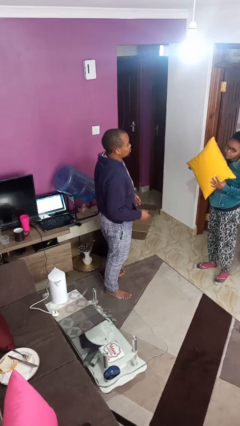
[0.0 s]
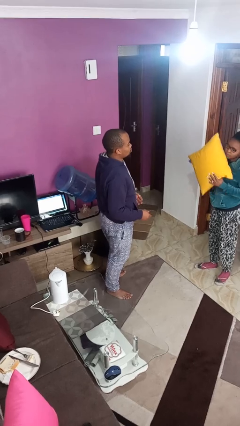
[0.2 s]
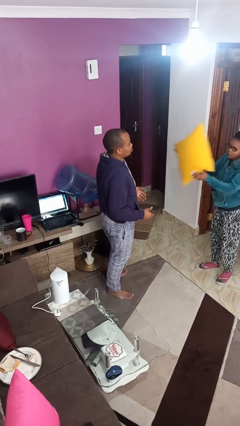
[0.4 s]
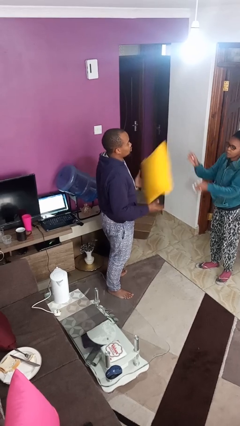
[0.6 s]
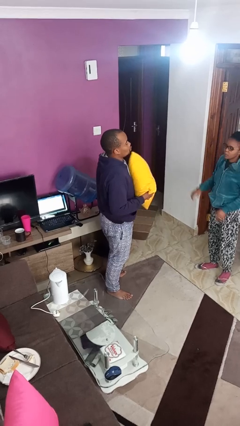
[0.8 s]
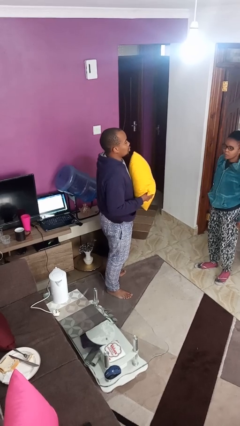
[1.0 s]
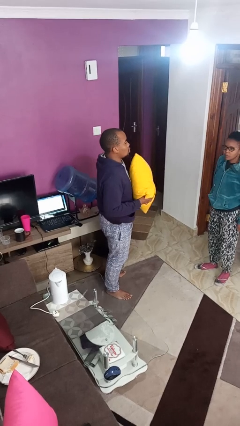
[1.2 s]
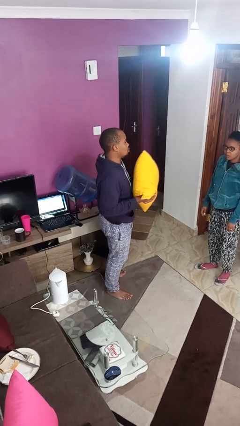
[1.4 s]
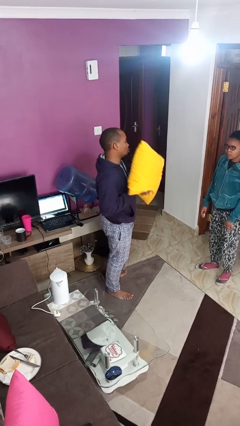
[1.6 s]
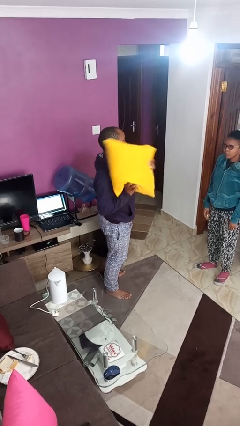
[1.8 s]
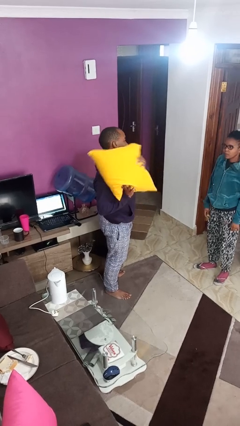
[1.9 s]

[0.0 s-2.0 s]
person catches object from person

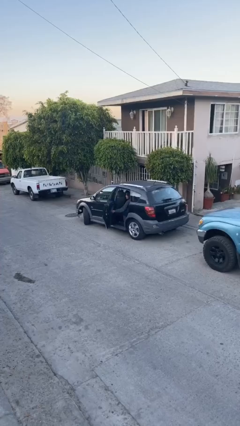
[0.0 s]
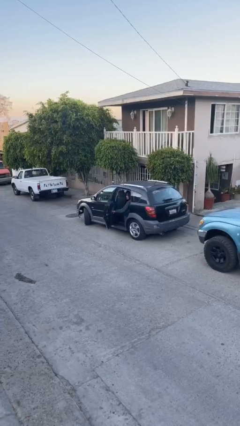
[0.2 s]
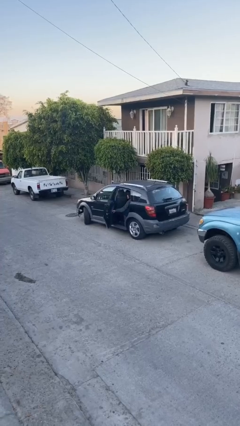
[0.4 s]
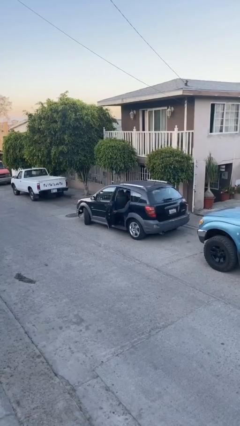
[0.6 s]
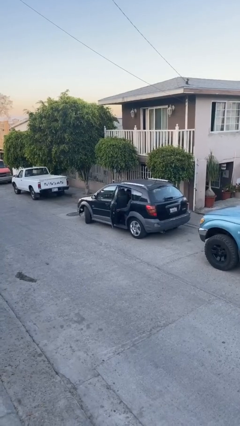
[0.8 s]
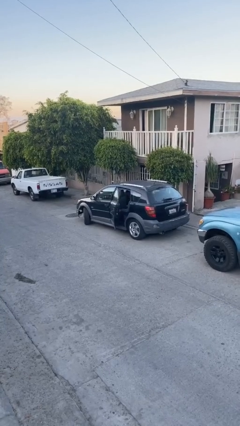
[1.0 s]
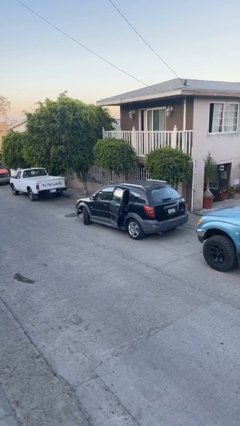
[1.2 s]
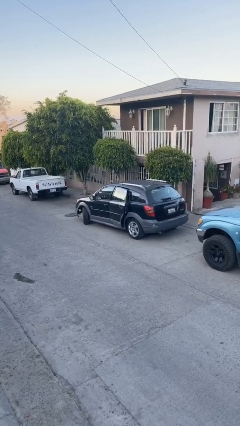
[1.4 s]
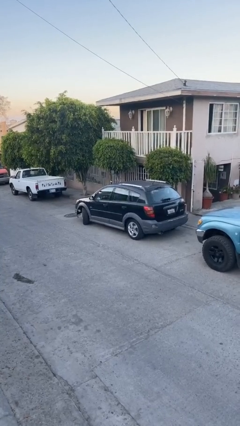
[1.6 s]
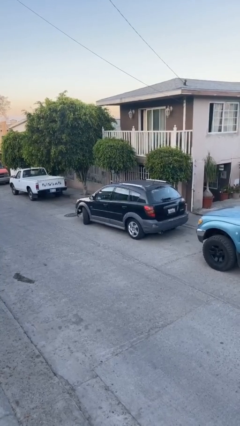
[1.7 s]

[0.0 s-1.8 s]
person closes car door

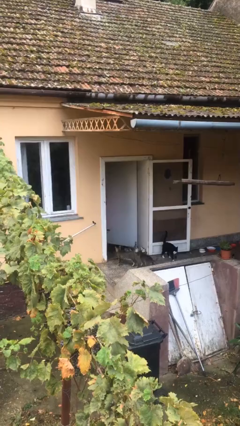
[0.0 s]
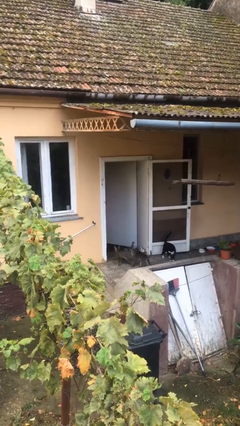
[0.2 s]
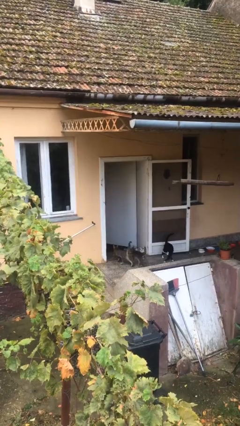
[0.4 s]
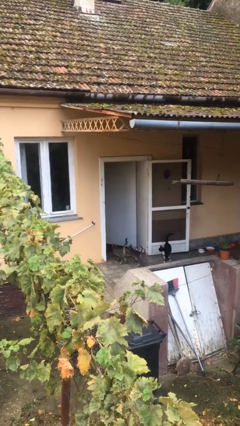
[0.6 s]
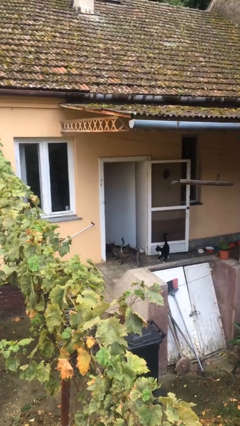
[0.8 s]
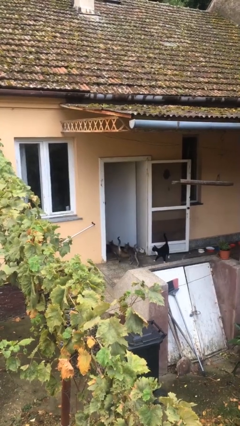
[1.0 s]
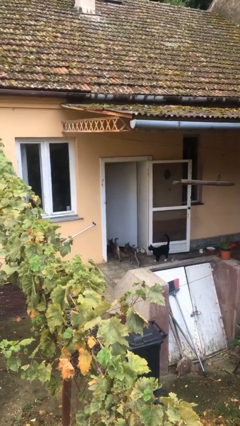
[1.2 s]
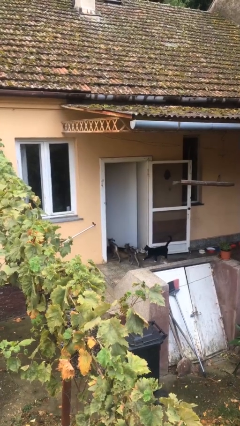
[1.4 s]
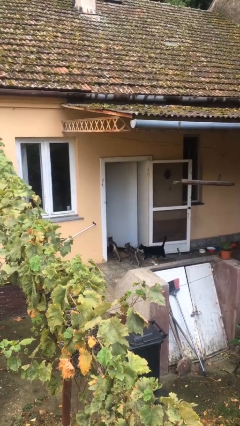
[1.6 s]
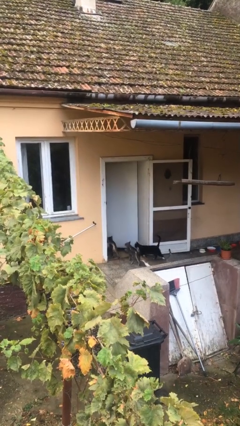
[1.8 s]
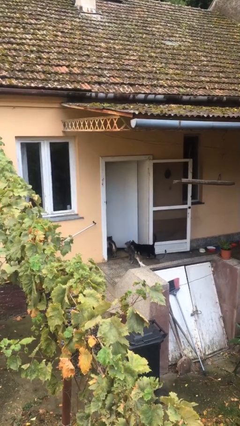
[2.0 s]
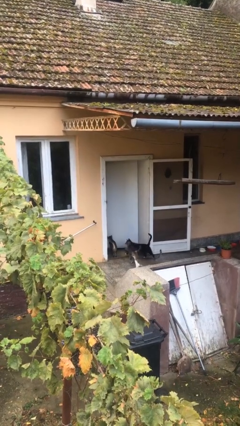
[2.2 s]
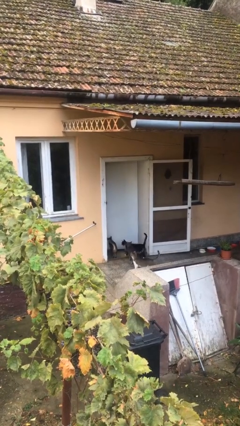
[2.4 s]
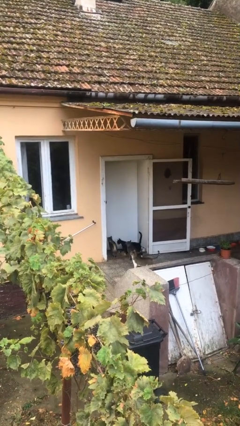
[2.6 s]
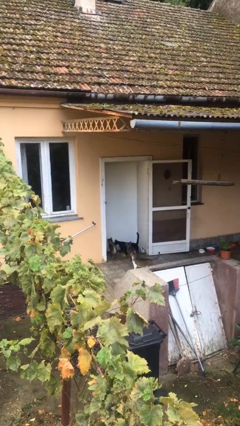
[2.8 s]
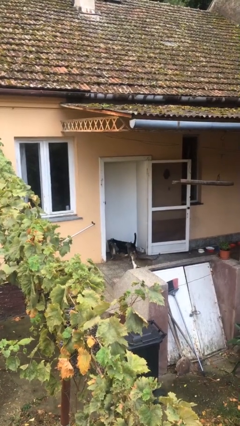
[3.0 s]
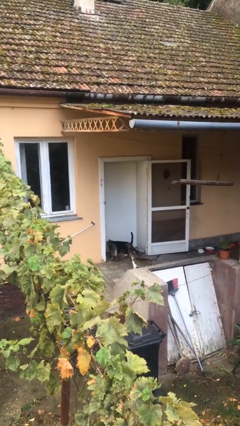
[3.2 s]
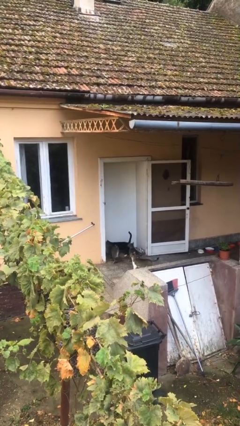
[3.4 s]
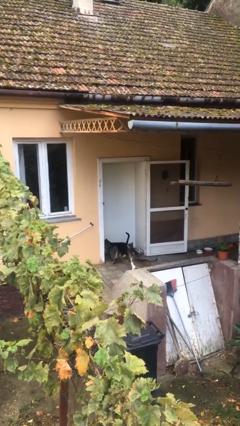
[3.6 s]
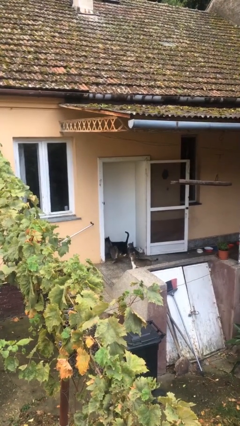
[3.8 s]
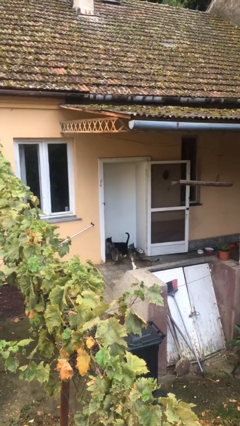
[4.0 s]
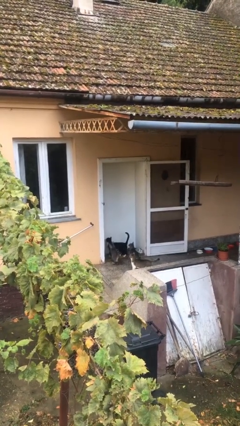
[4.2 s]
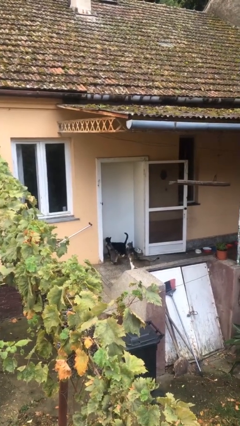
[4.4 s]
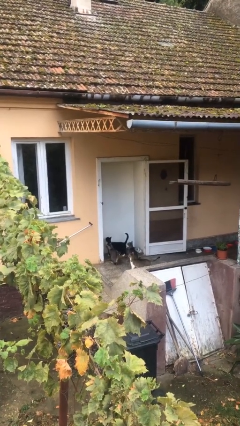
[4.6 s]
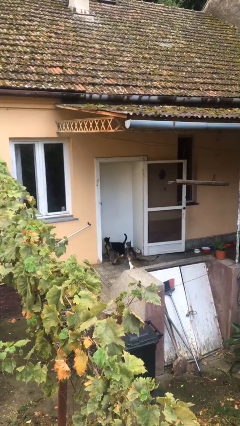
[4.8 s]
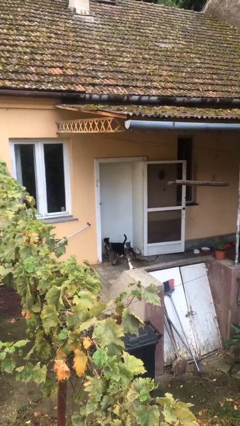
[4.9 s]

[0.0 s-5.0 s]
person closes facility door

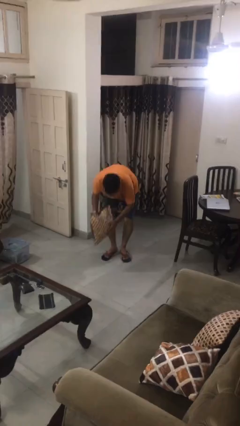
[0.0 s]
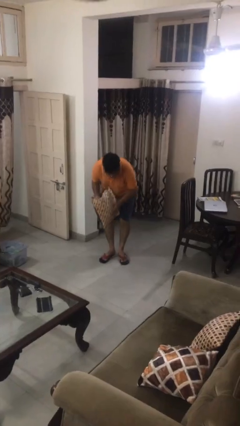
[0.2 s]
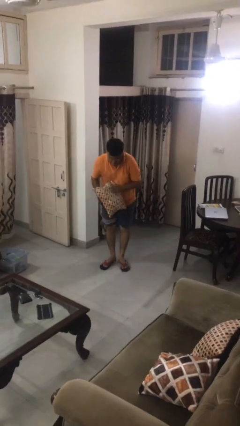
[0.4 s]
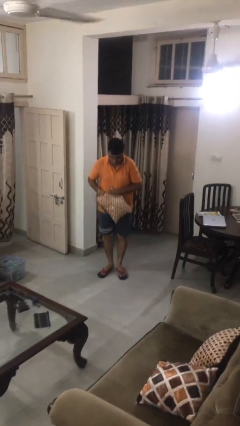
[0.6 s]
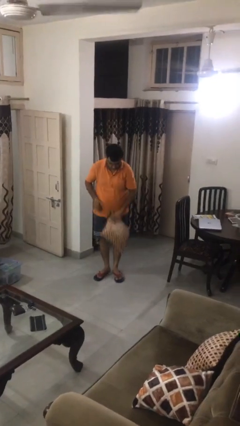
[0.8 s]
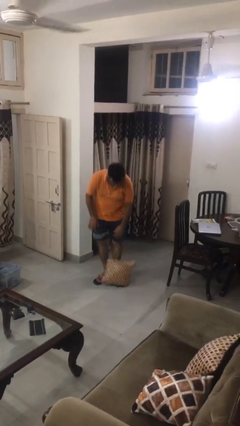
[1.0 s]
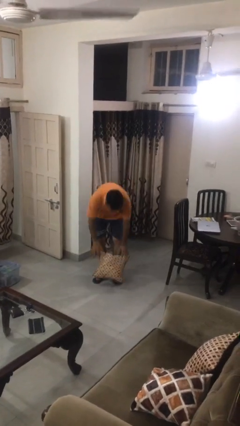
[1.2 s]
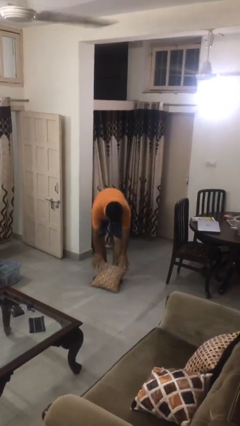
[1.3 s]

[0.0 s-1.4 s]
person picks up object from floor

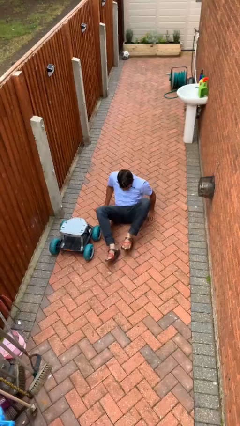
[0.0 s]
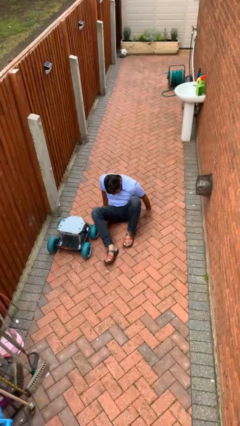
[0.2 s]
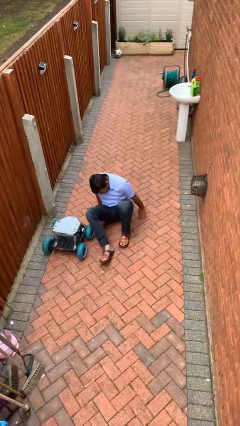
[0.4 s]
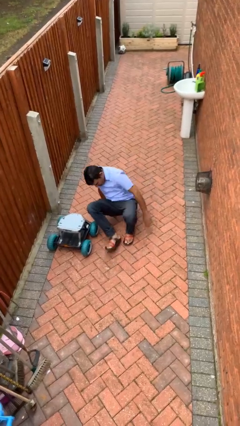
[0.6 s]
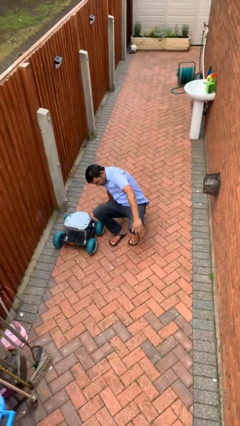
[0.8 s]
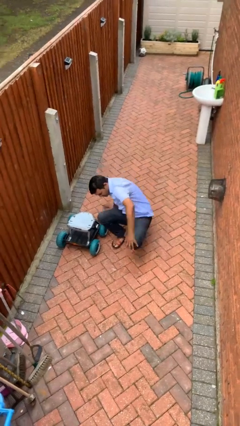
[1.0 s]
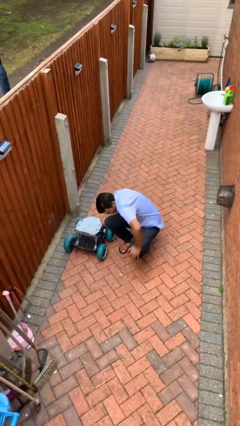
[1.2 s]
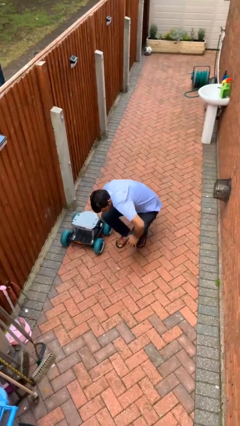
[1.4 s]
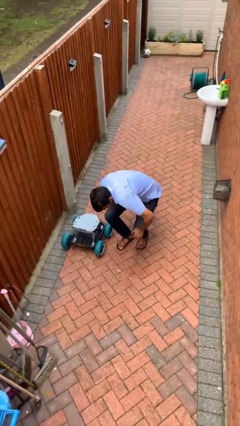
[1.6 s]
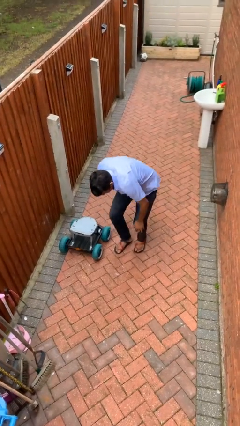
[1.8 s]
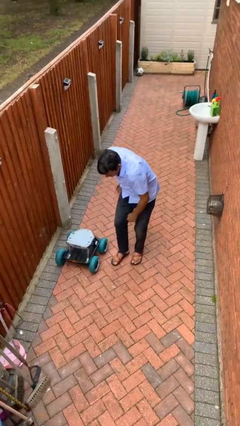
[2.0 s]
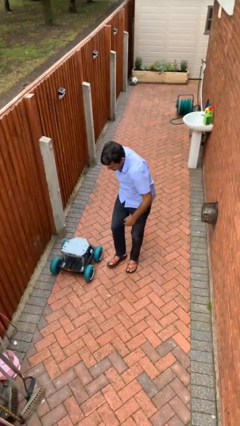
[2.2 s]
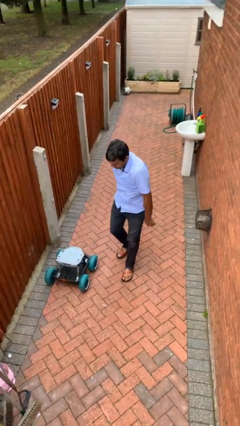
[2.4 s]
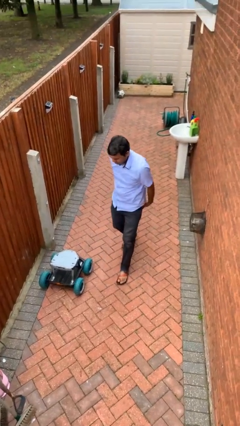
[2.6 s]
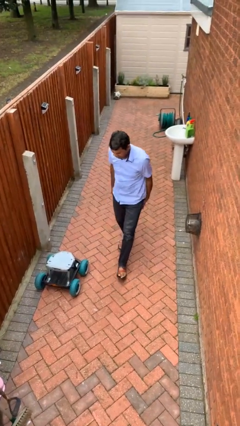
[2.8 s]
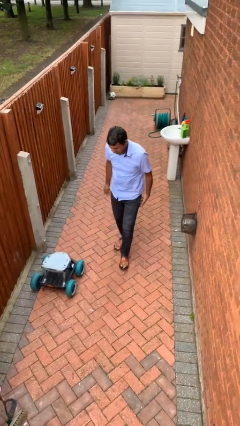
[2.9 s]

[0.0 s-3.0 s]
person stands up from floor

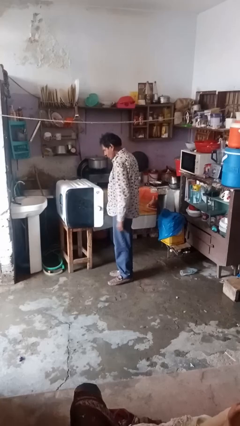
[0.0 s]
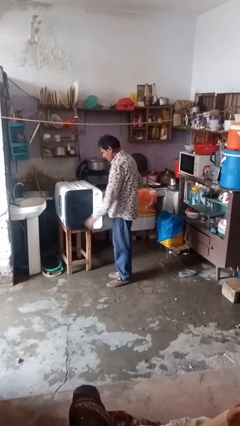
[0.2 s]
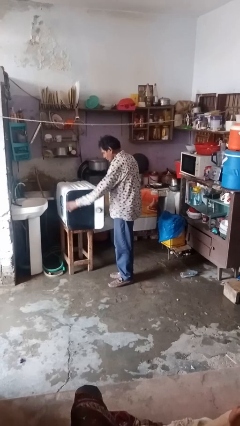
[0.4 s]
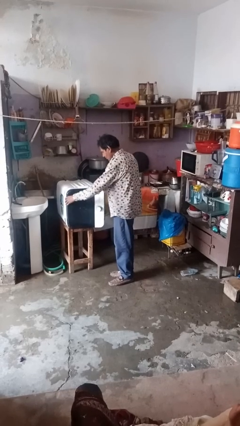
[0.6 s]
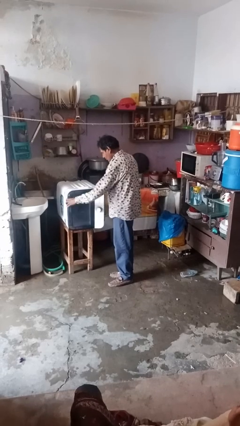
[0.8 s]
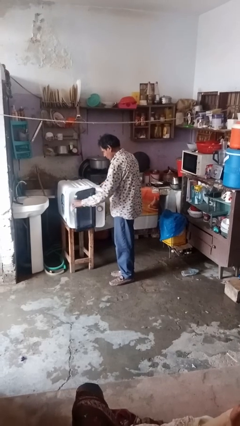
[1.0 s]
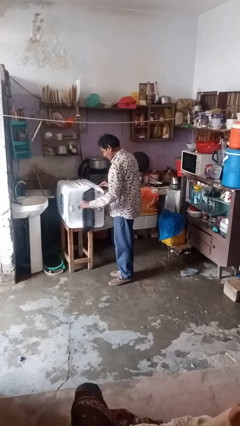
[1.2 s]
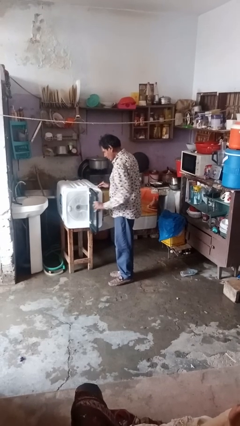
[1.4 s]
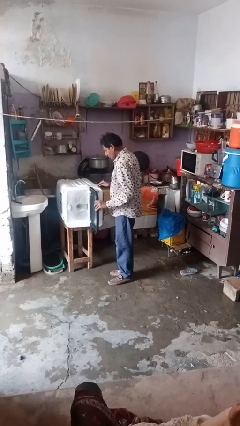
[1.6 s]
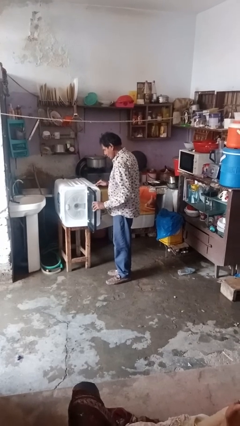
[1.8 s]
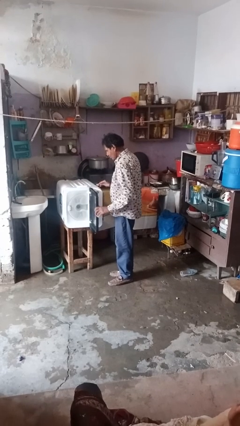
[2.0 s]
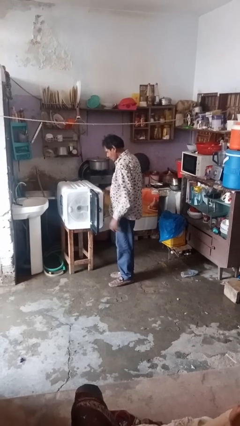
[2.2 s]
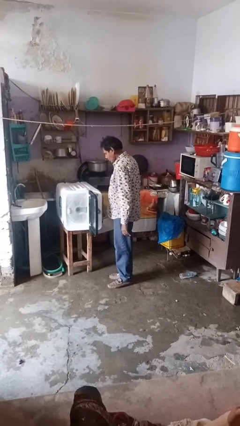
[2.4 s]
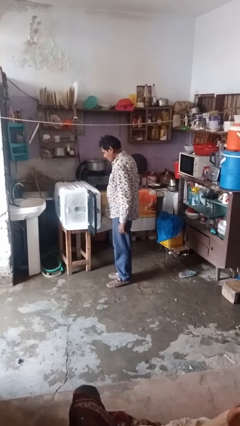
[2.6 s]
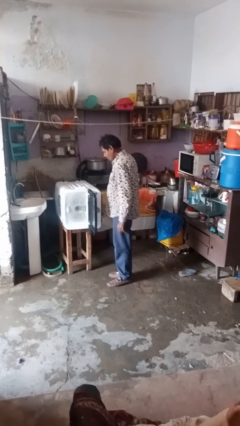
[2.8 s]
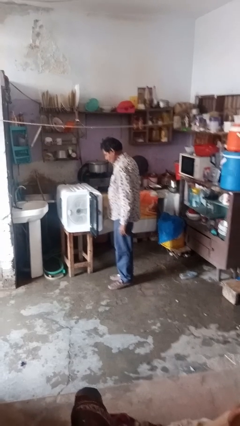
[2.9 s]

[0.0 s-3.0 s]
person opens dishwasher

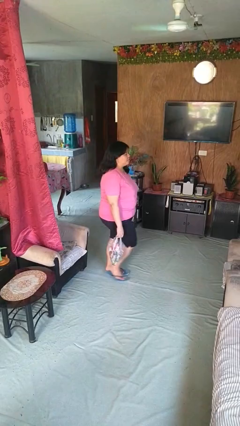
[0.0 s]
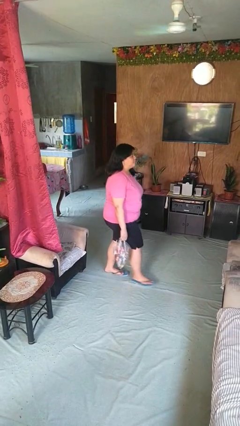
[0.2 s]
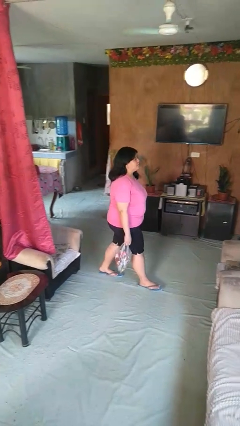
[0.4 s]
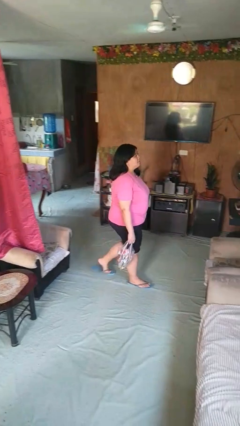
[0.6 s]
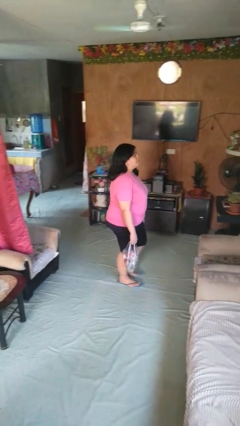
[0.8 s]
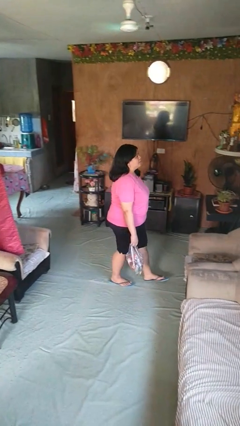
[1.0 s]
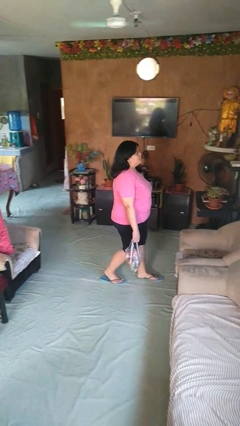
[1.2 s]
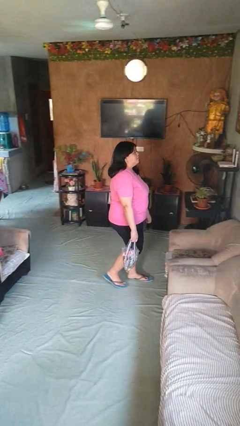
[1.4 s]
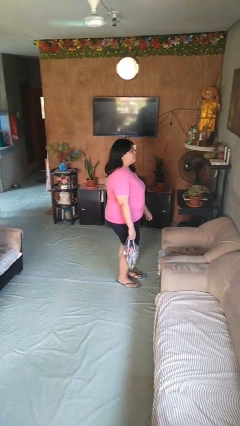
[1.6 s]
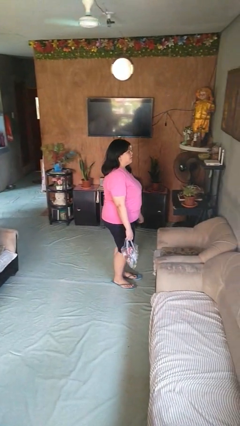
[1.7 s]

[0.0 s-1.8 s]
person carries groceries
